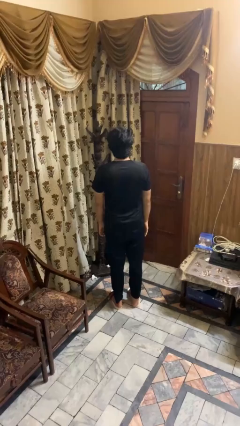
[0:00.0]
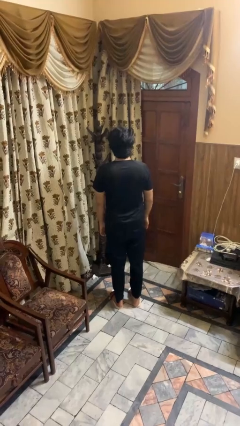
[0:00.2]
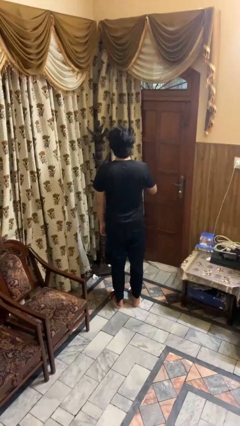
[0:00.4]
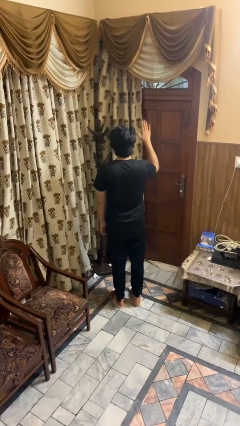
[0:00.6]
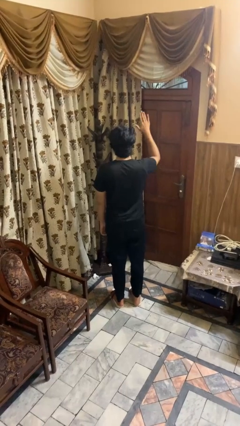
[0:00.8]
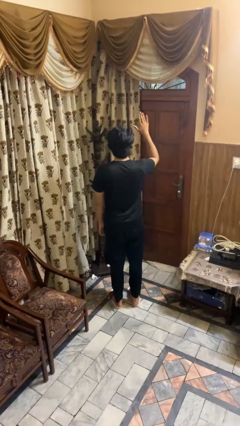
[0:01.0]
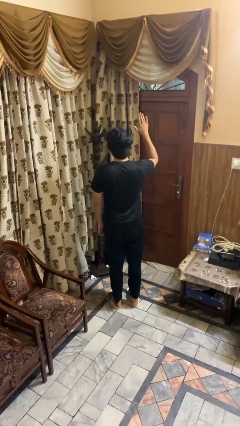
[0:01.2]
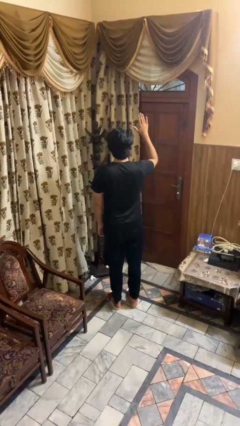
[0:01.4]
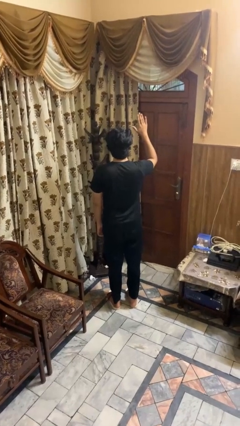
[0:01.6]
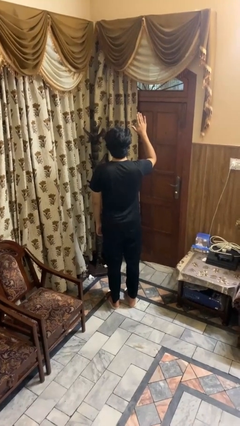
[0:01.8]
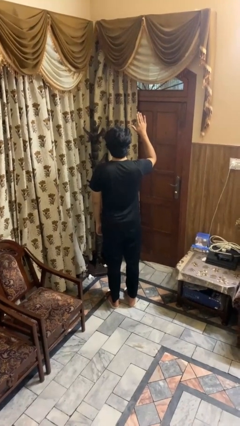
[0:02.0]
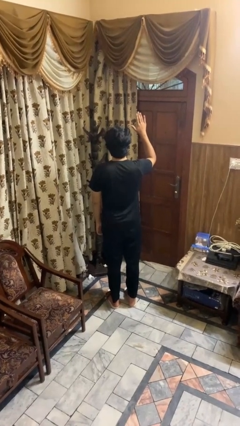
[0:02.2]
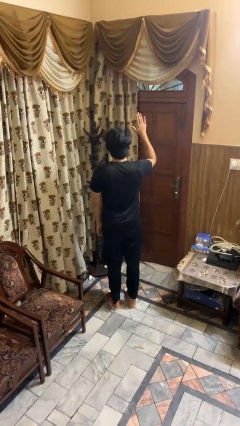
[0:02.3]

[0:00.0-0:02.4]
person gestures raise hand

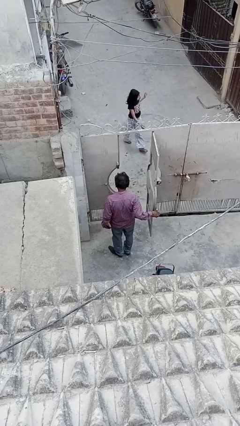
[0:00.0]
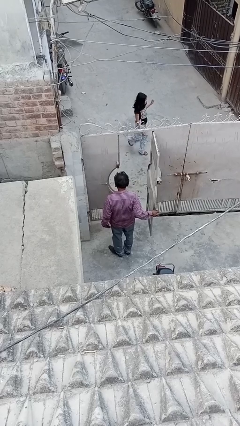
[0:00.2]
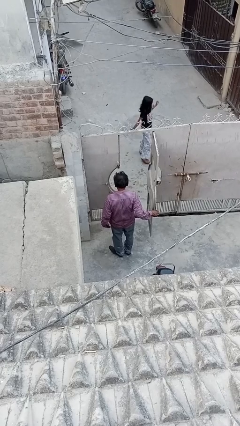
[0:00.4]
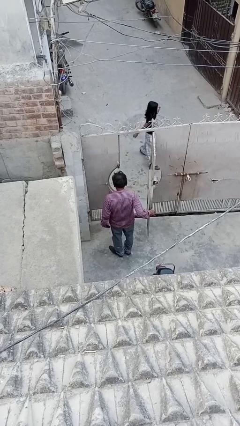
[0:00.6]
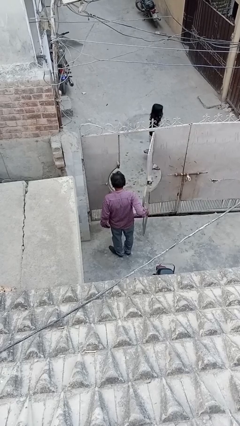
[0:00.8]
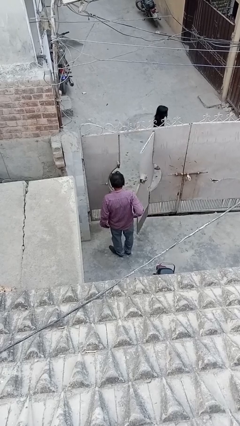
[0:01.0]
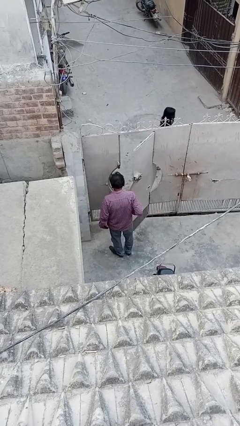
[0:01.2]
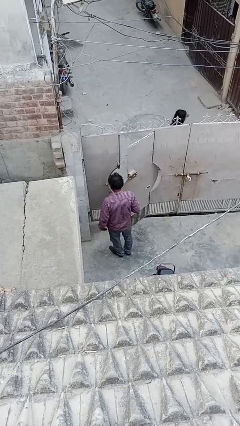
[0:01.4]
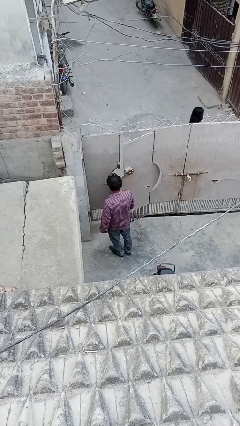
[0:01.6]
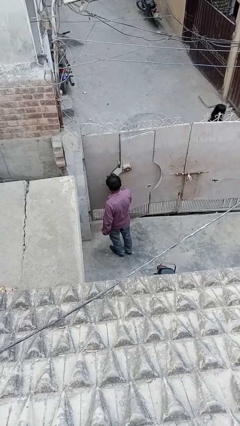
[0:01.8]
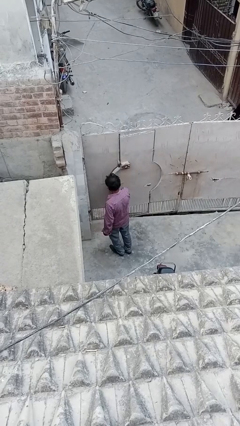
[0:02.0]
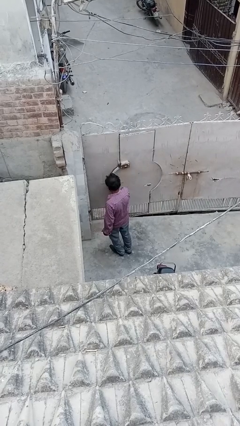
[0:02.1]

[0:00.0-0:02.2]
person closes facility door

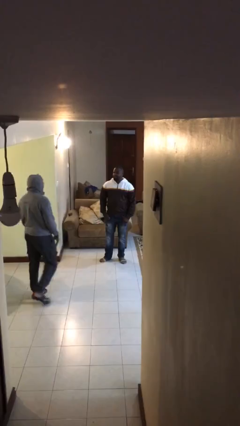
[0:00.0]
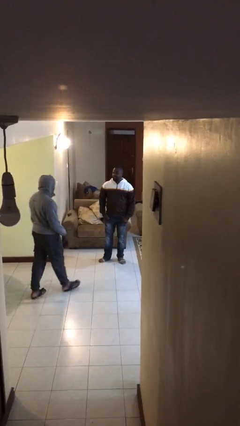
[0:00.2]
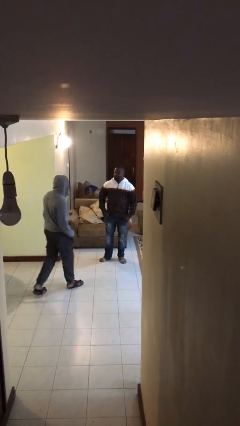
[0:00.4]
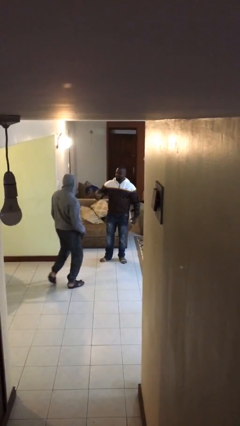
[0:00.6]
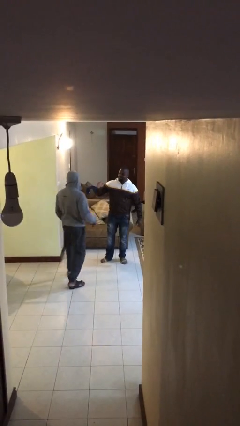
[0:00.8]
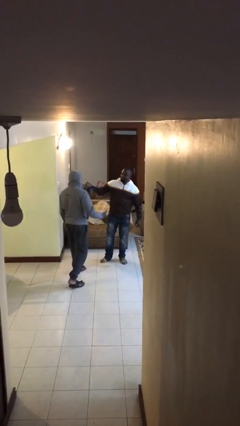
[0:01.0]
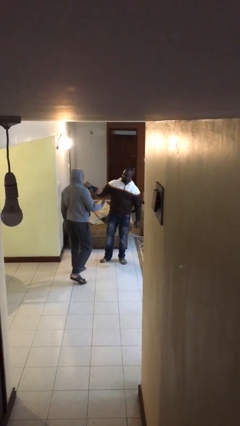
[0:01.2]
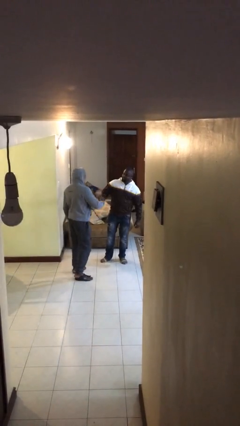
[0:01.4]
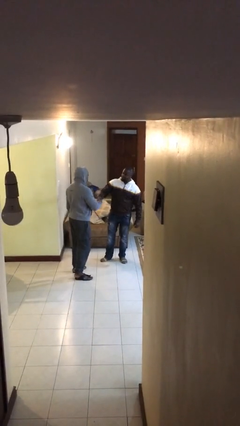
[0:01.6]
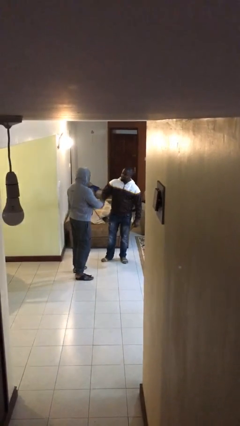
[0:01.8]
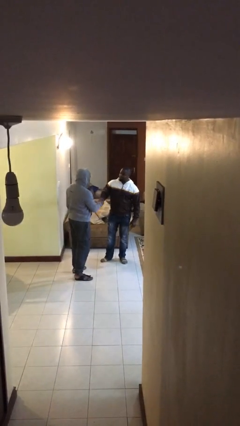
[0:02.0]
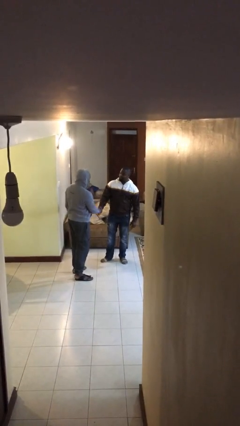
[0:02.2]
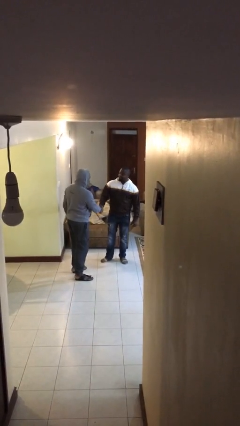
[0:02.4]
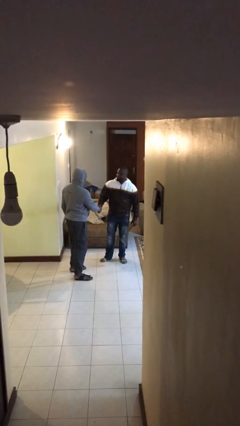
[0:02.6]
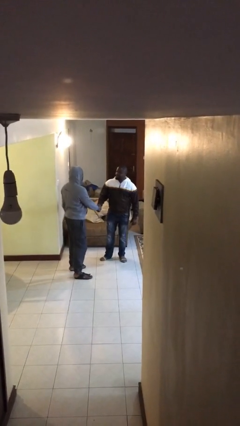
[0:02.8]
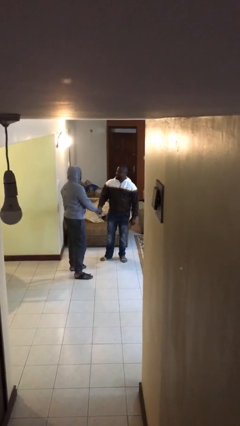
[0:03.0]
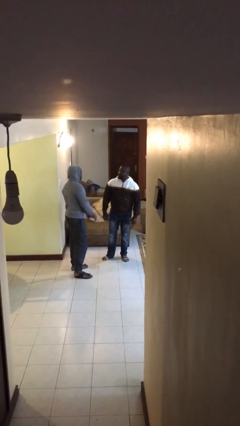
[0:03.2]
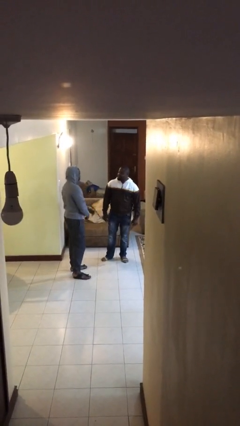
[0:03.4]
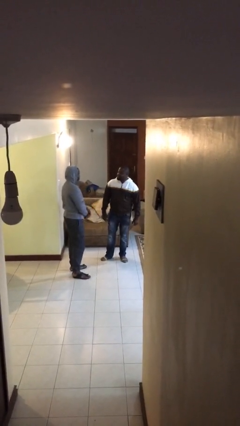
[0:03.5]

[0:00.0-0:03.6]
person shakes hand

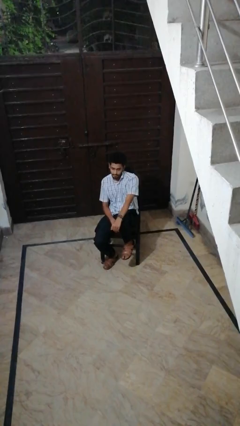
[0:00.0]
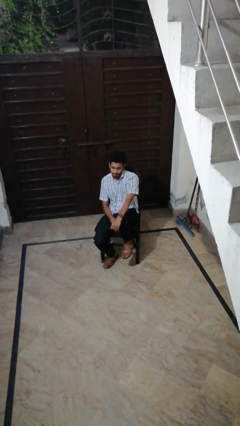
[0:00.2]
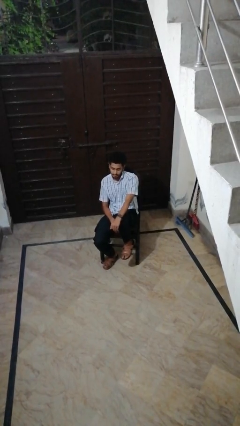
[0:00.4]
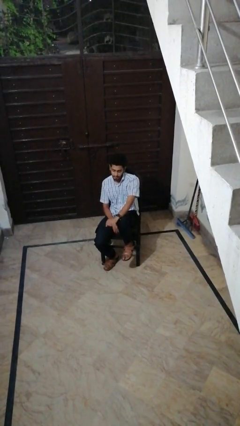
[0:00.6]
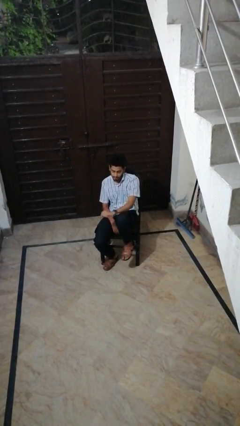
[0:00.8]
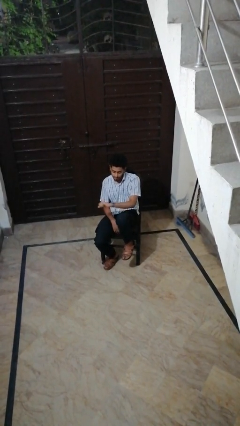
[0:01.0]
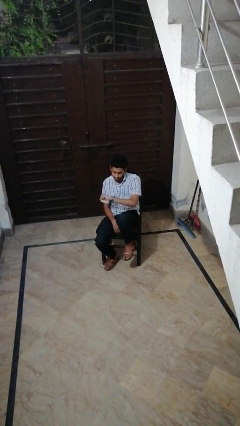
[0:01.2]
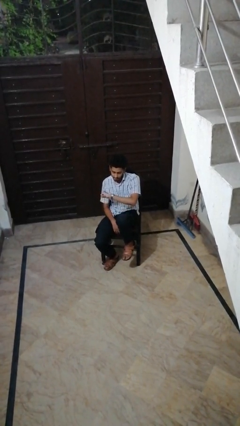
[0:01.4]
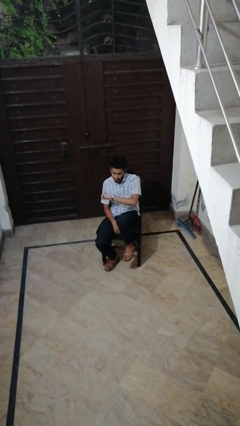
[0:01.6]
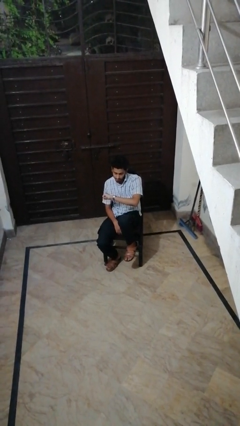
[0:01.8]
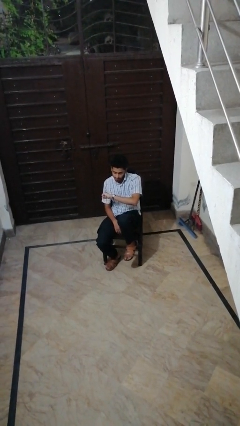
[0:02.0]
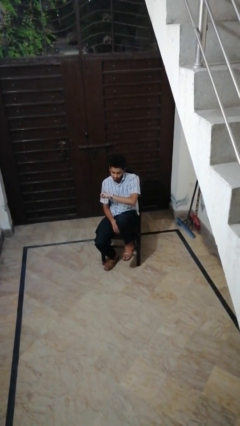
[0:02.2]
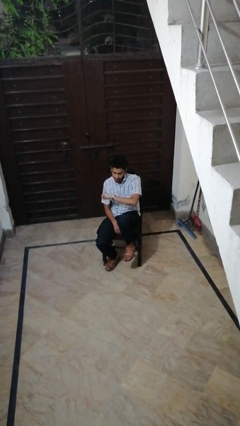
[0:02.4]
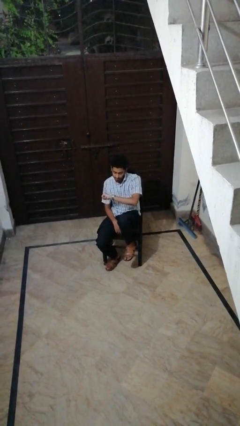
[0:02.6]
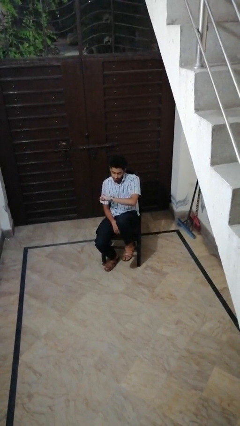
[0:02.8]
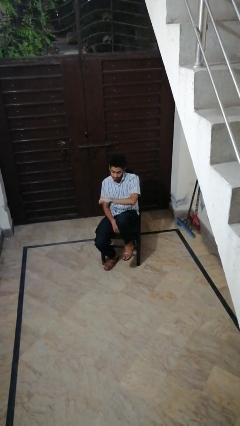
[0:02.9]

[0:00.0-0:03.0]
person looks at wristwatch

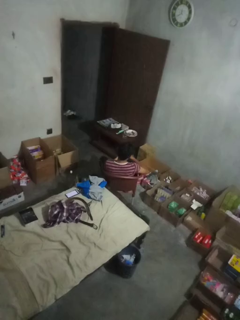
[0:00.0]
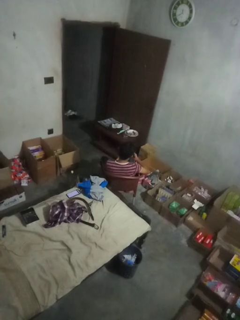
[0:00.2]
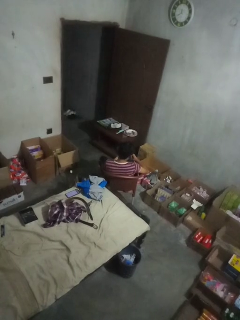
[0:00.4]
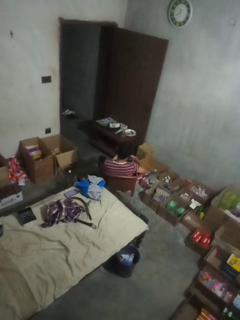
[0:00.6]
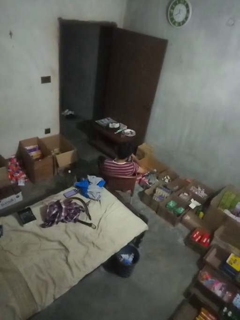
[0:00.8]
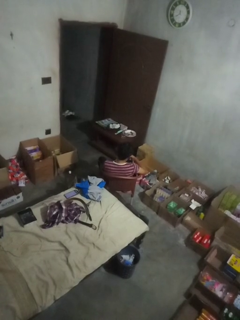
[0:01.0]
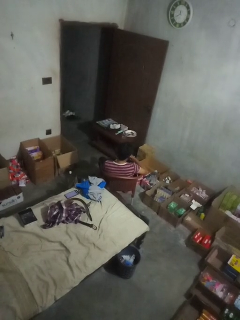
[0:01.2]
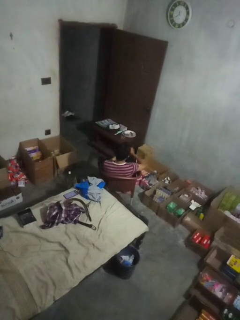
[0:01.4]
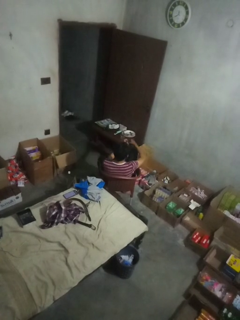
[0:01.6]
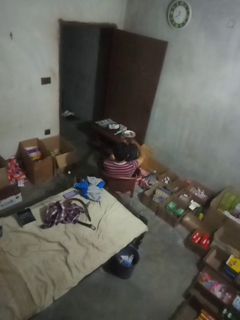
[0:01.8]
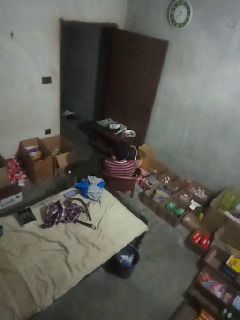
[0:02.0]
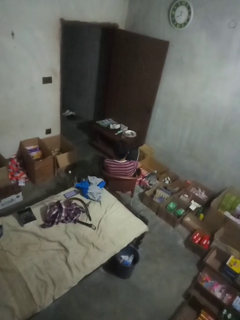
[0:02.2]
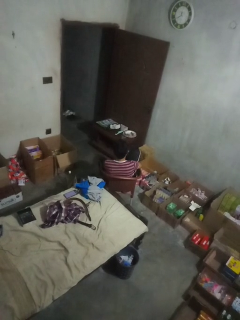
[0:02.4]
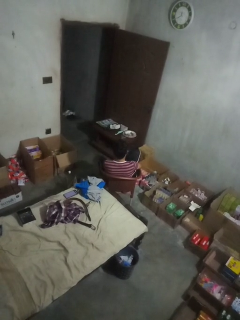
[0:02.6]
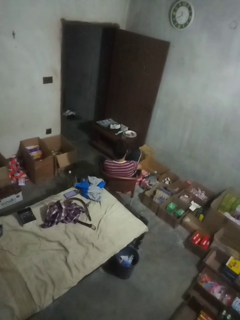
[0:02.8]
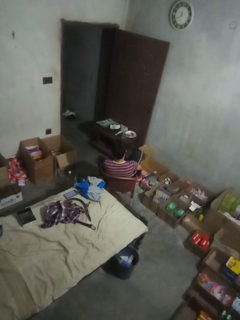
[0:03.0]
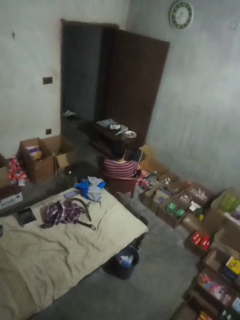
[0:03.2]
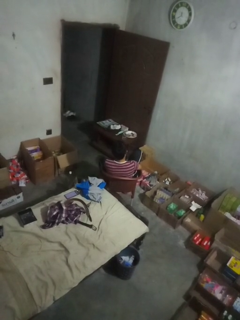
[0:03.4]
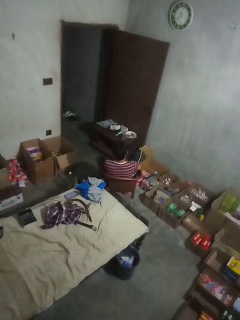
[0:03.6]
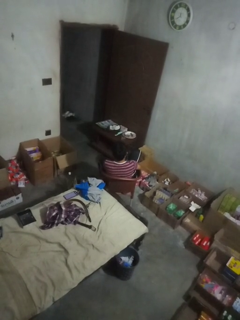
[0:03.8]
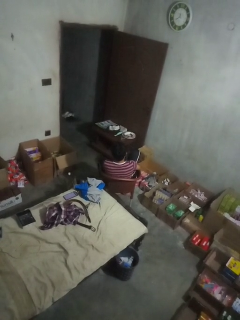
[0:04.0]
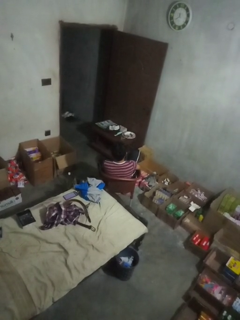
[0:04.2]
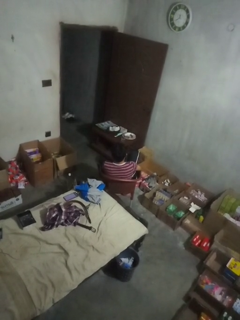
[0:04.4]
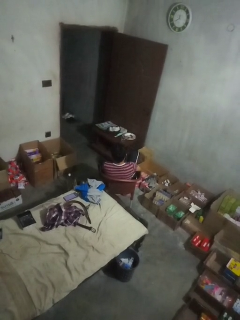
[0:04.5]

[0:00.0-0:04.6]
person puts on socks

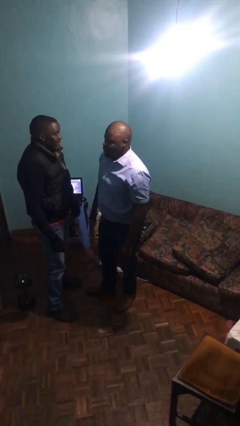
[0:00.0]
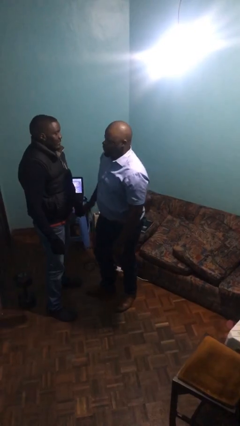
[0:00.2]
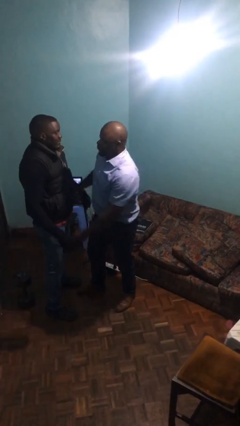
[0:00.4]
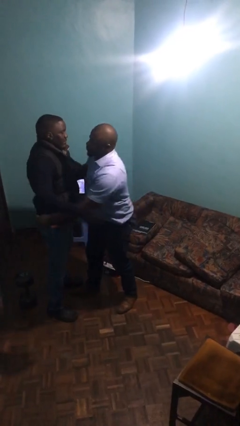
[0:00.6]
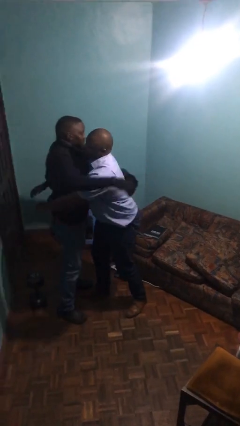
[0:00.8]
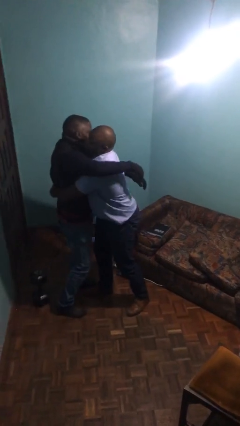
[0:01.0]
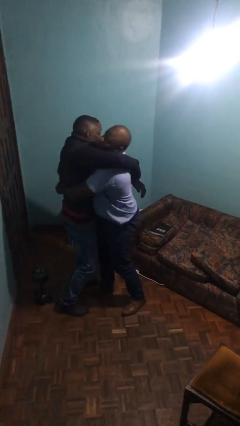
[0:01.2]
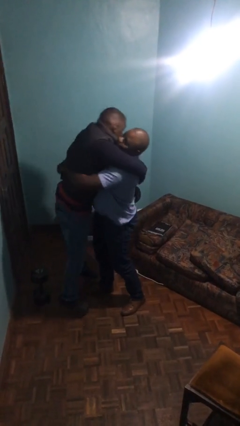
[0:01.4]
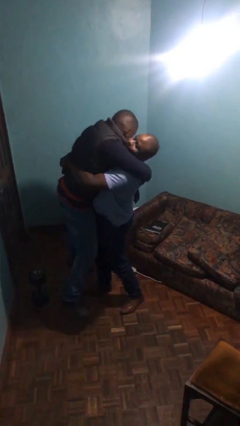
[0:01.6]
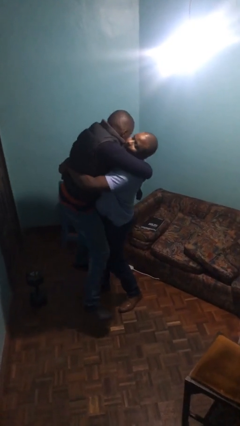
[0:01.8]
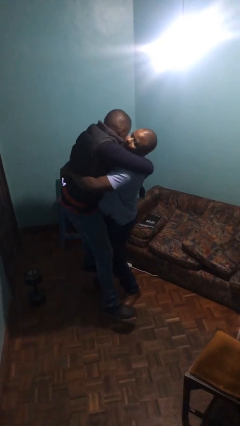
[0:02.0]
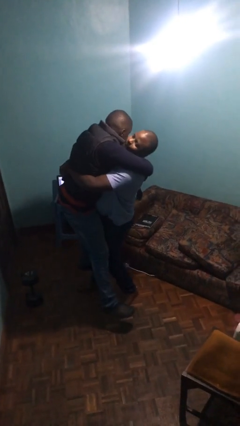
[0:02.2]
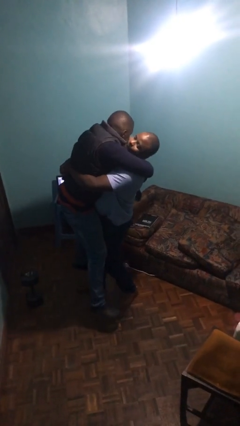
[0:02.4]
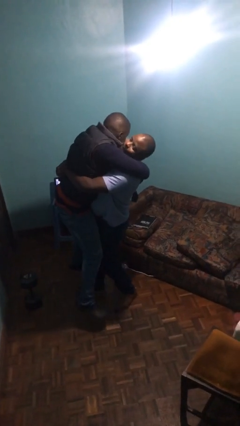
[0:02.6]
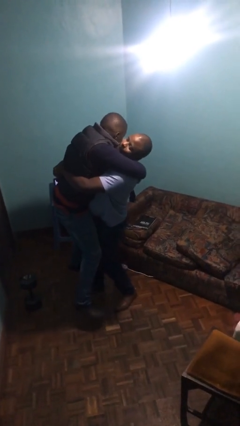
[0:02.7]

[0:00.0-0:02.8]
person picks up person
